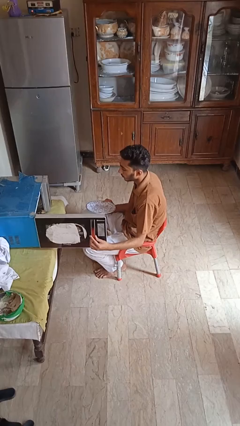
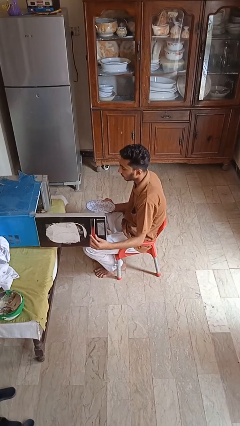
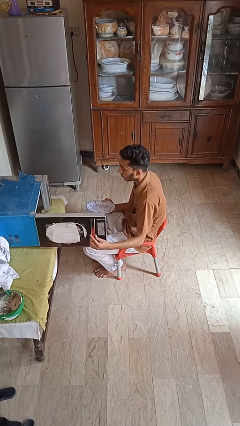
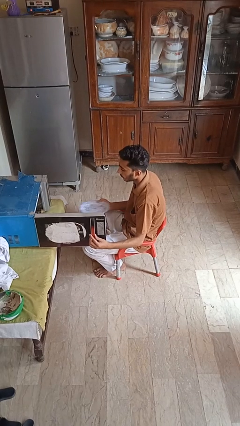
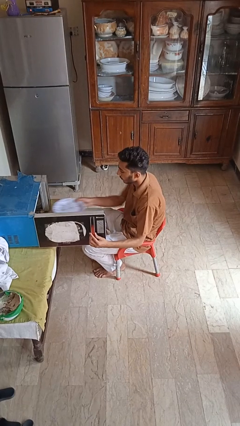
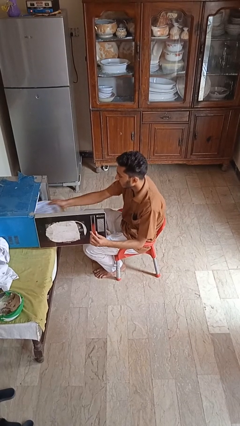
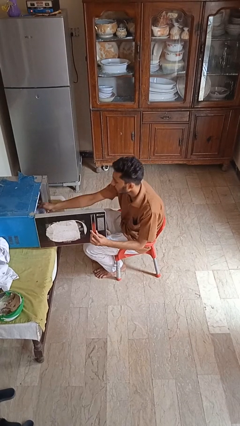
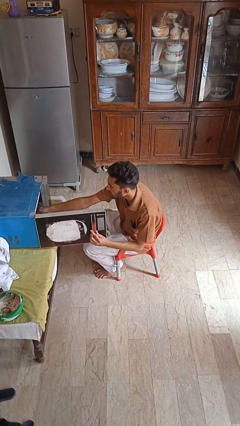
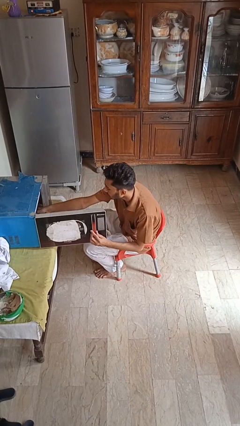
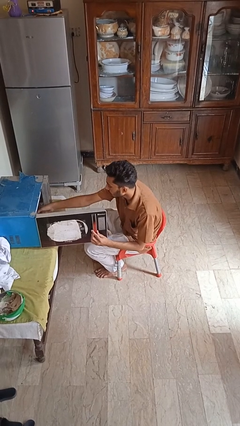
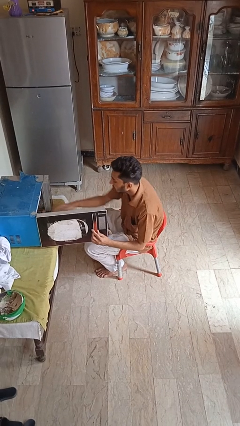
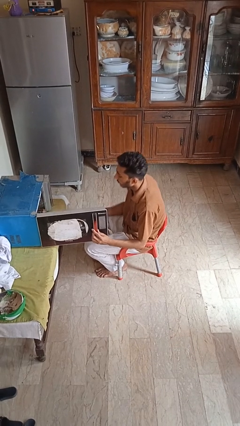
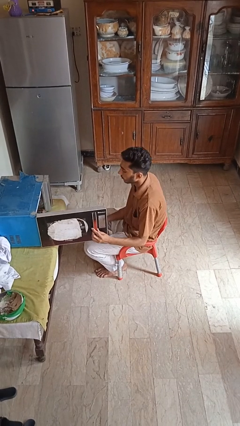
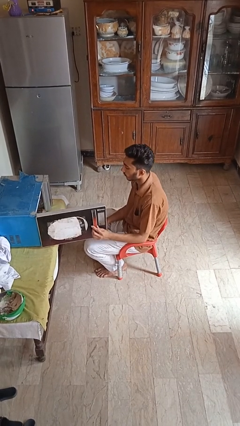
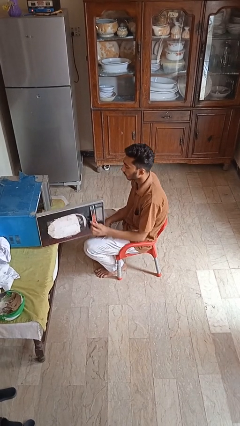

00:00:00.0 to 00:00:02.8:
person puts object into microwave

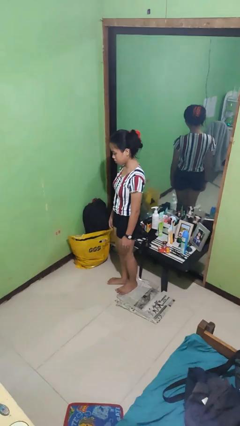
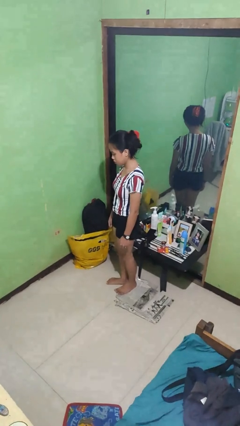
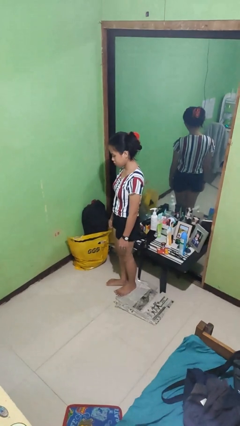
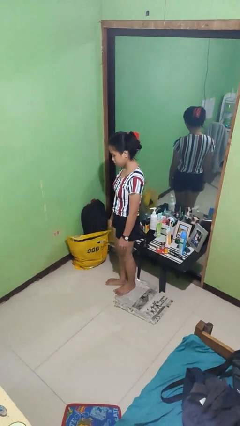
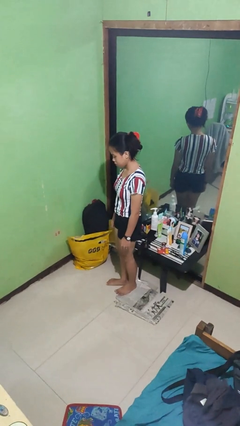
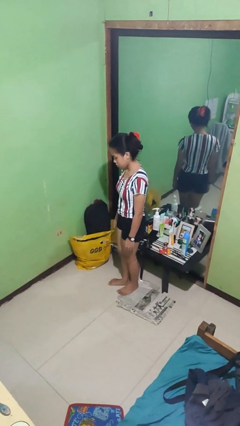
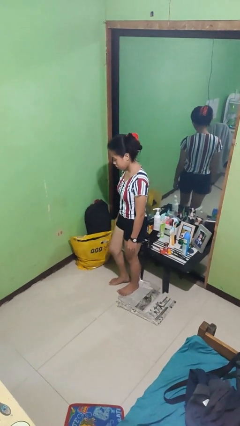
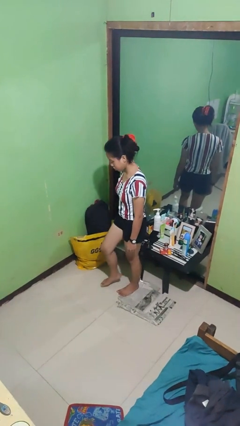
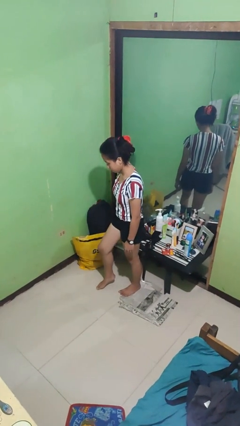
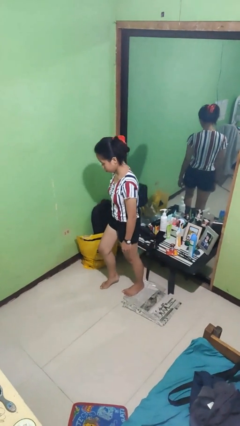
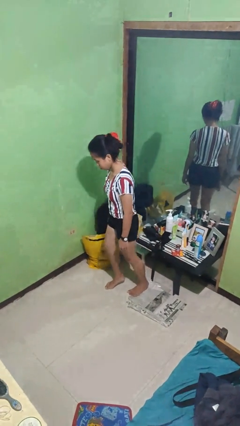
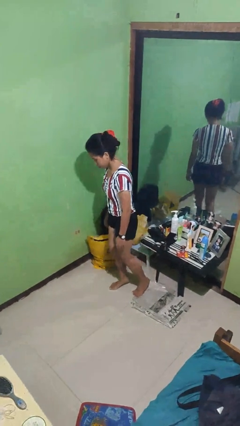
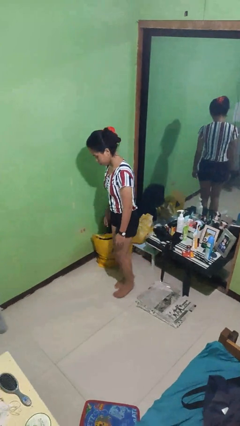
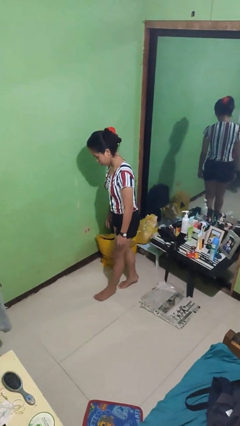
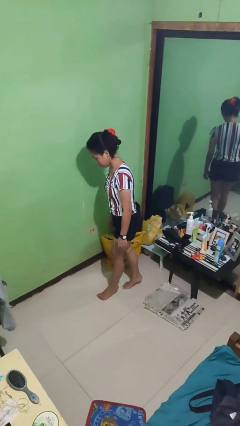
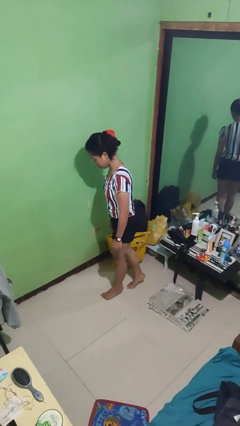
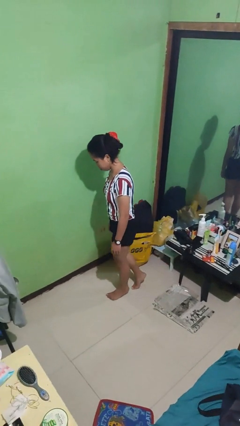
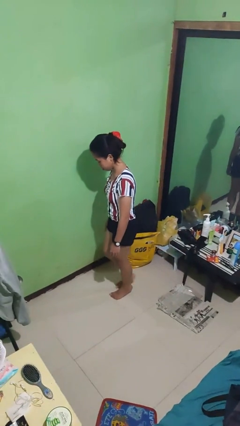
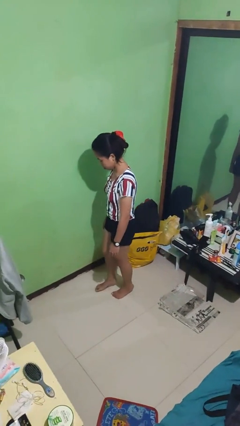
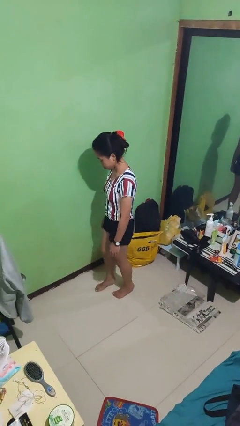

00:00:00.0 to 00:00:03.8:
person walks tiptoe

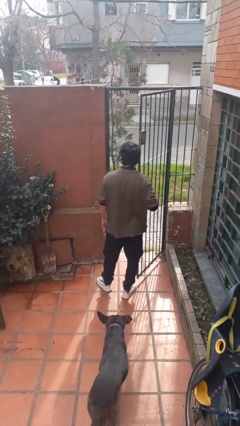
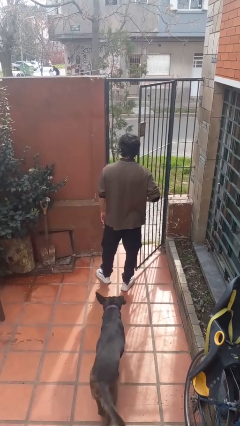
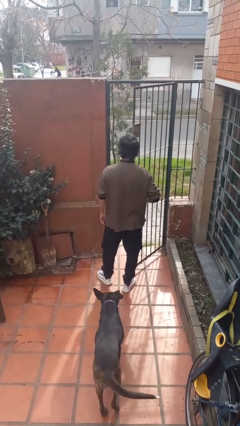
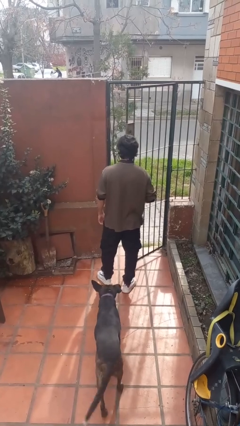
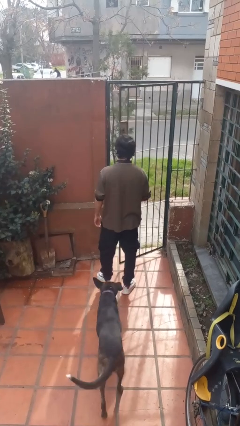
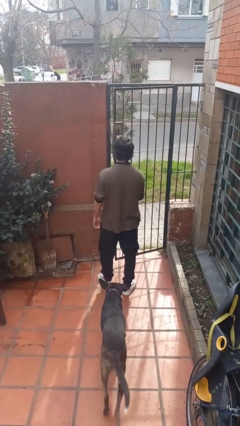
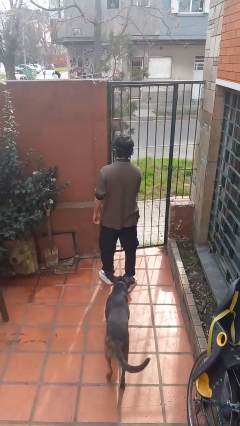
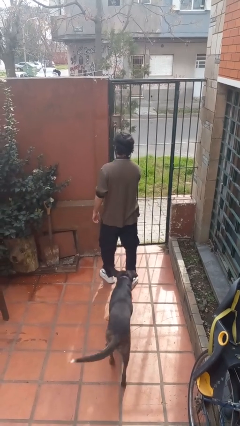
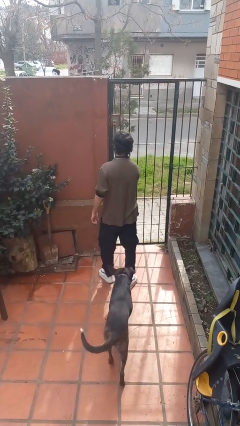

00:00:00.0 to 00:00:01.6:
person closes gate

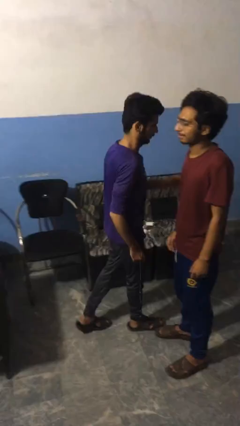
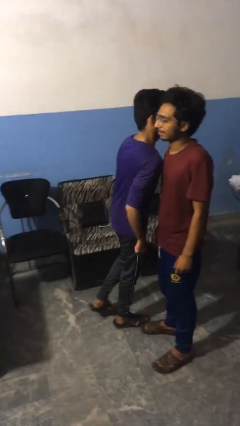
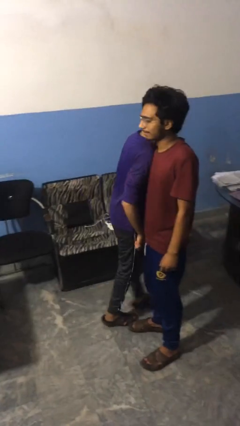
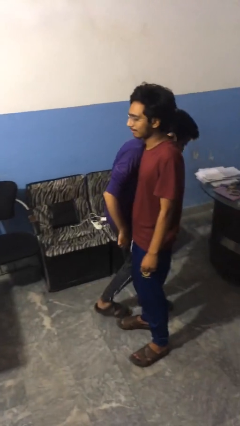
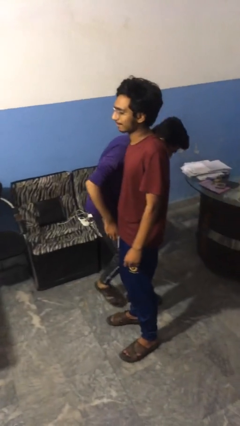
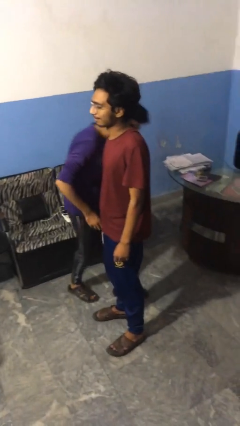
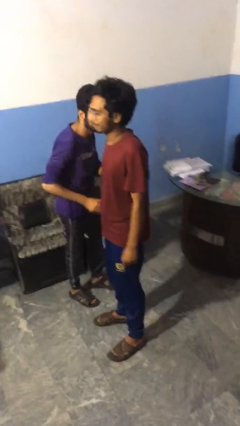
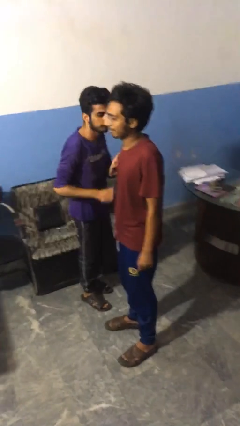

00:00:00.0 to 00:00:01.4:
person bumps into person

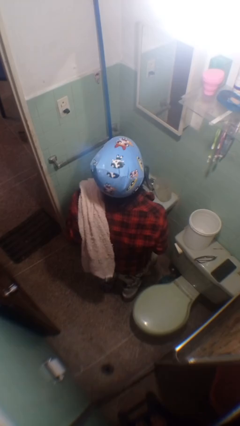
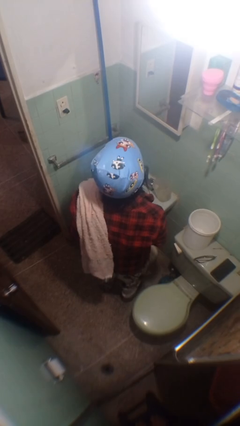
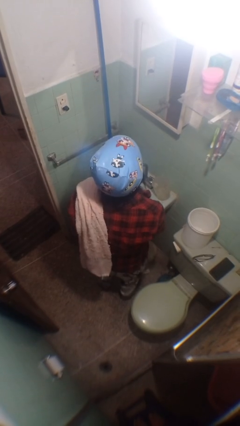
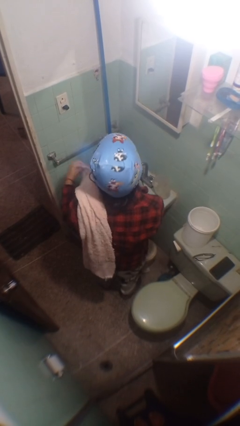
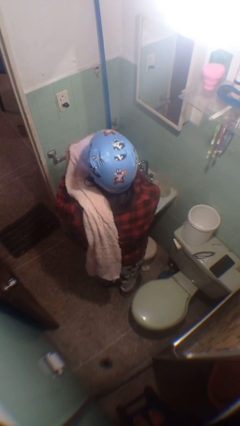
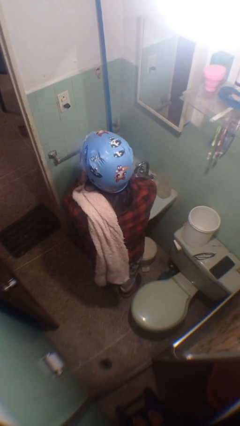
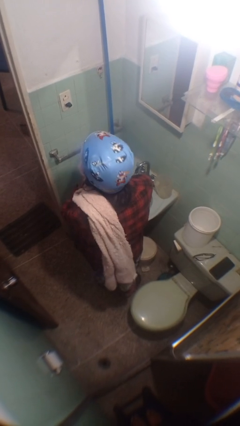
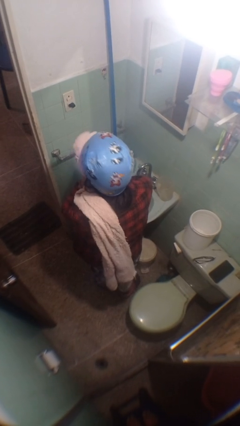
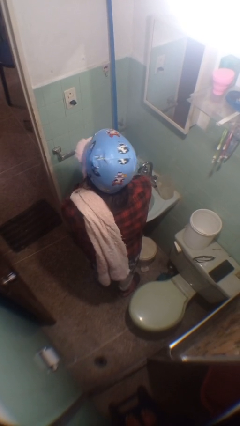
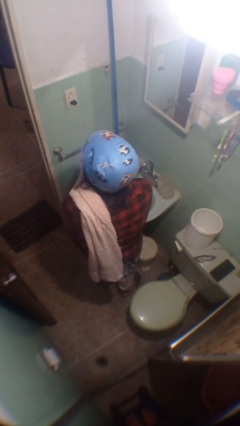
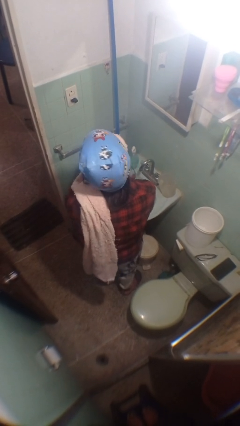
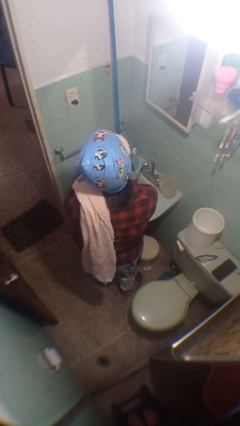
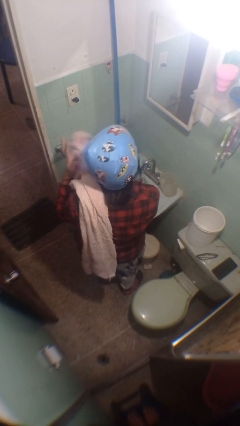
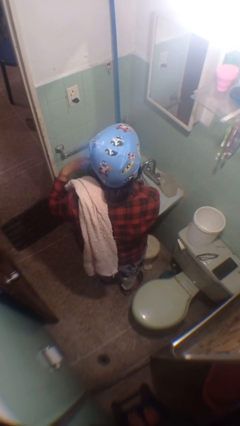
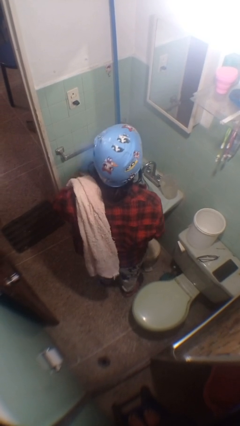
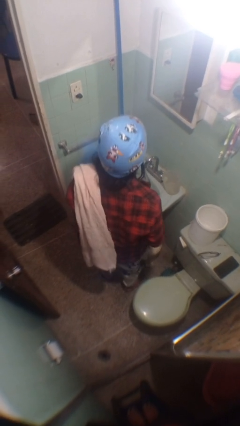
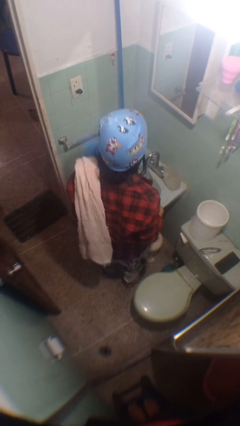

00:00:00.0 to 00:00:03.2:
person dries face with towel

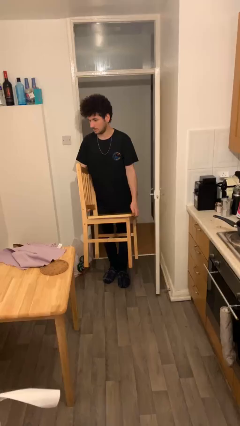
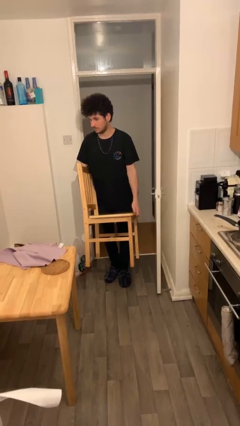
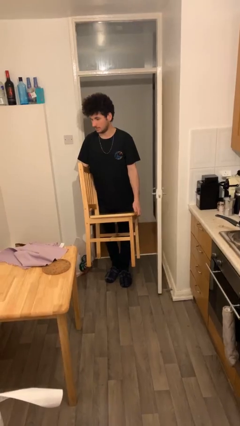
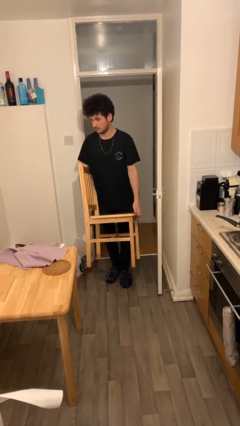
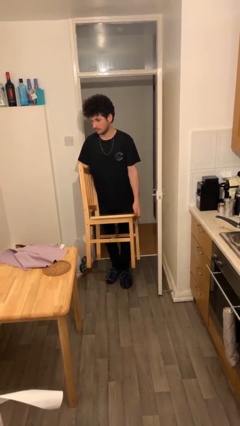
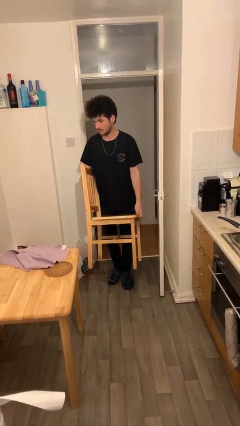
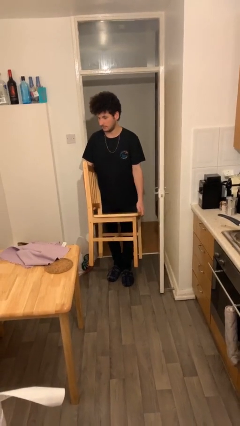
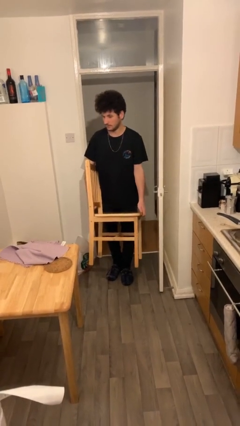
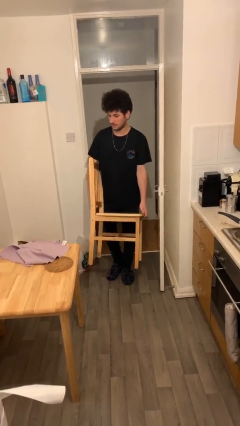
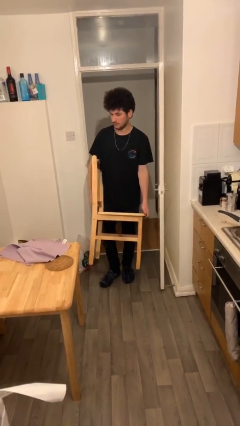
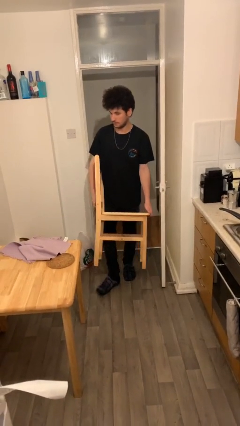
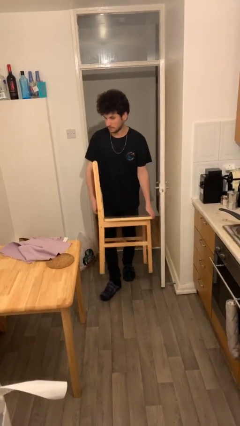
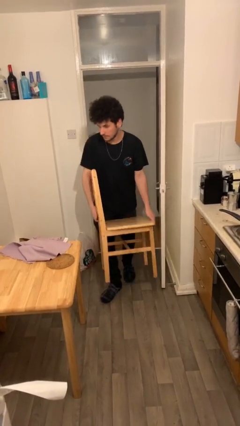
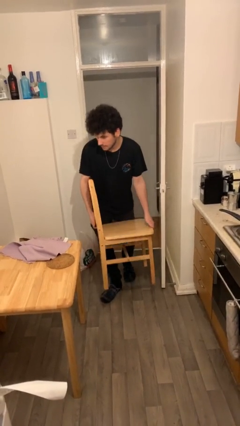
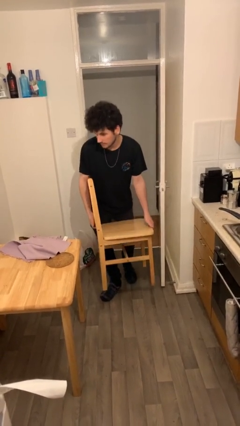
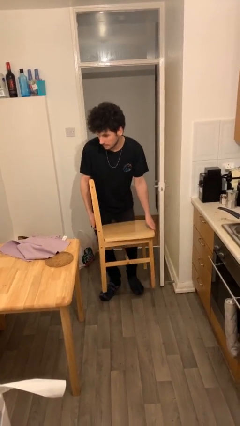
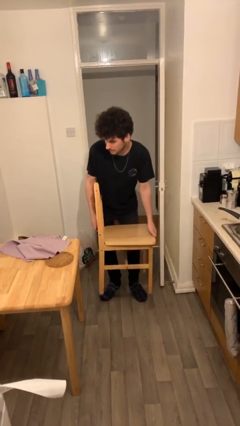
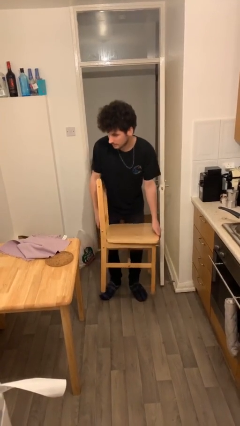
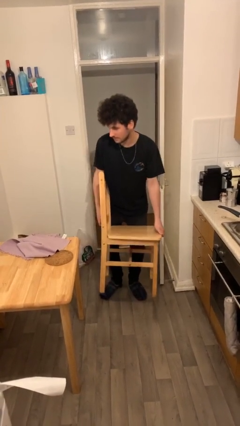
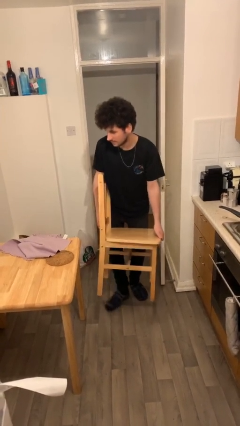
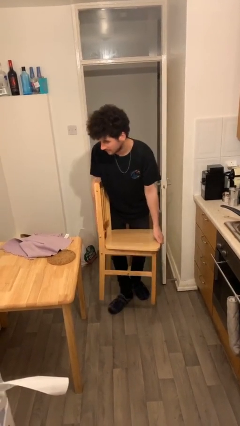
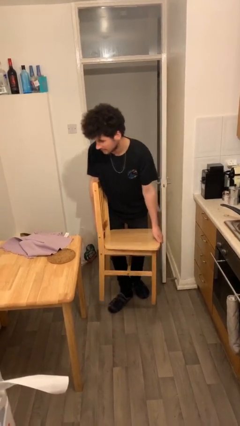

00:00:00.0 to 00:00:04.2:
person carries heavy object

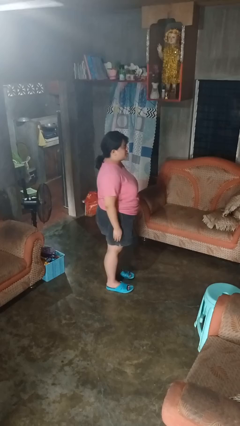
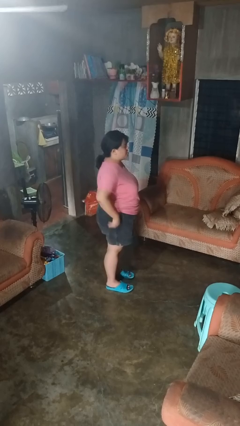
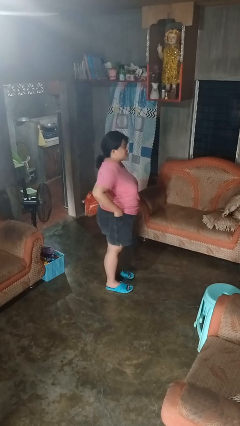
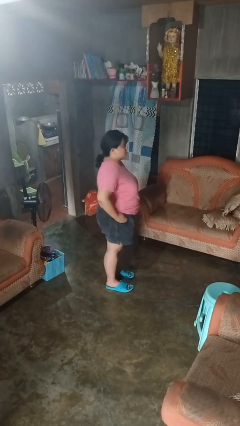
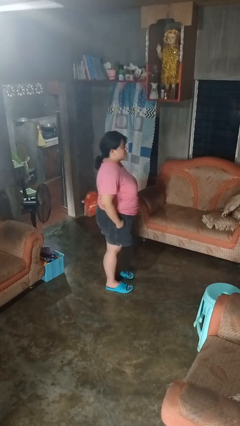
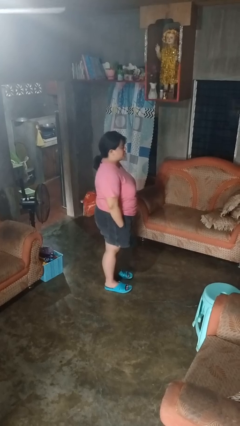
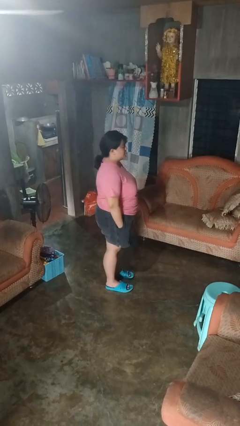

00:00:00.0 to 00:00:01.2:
person puts hands in back pockets
